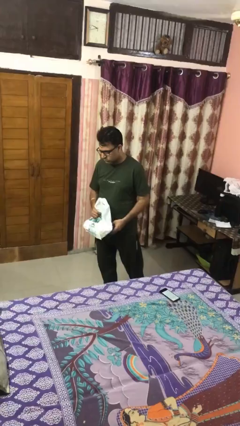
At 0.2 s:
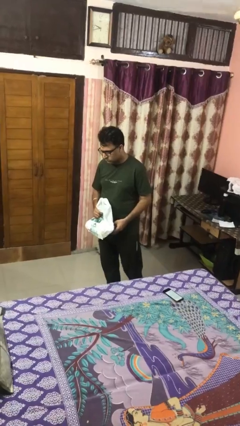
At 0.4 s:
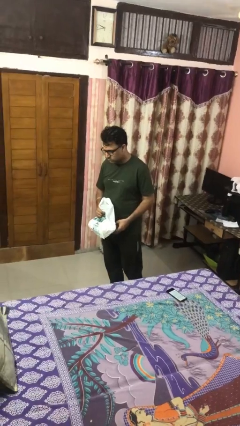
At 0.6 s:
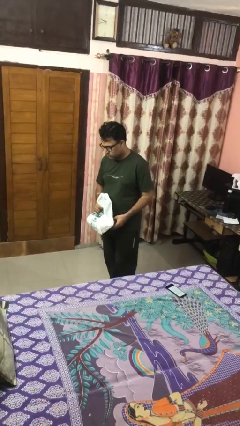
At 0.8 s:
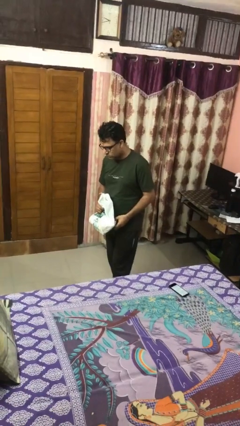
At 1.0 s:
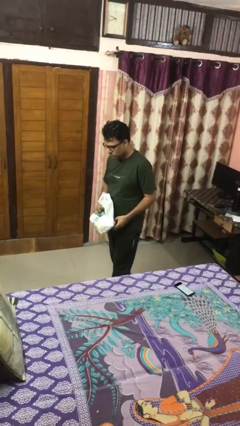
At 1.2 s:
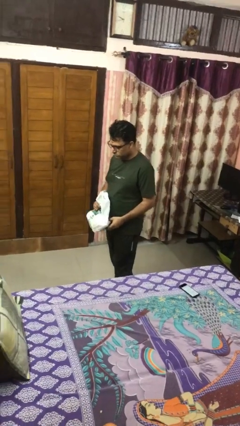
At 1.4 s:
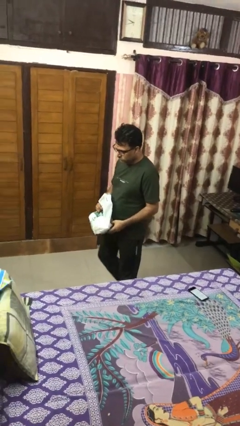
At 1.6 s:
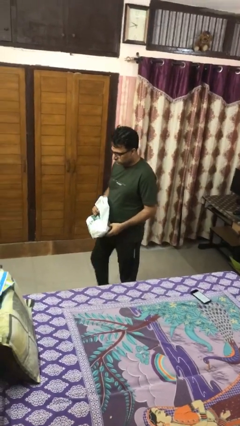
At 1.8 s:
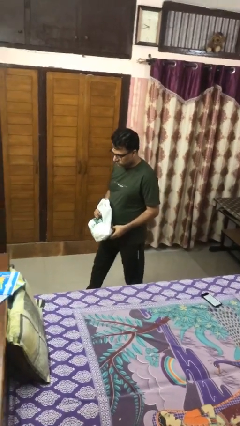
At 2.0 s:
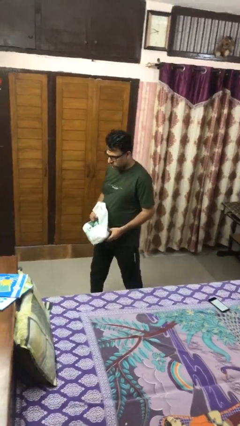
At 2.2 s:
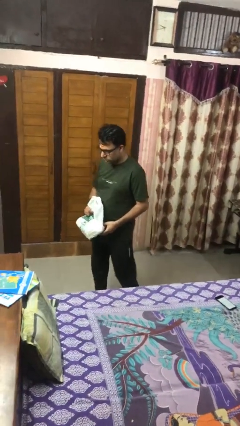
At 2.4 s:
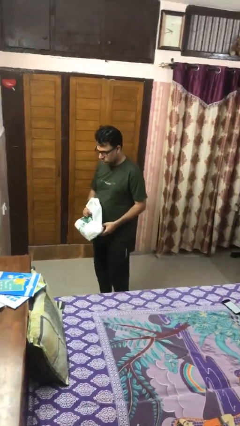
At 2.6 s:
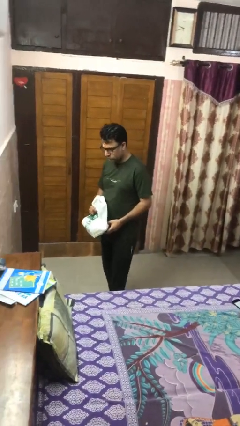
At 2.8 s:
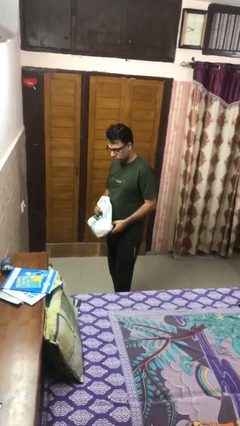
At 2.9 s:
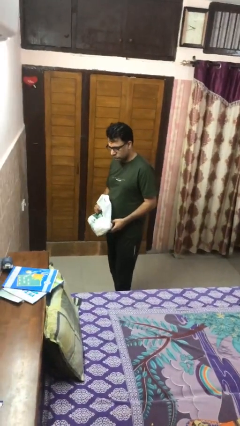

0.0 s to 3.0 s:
person carries groceries
